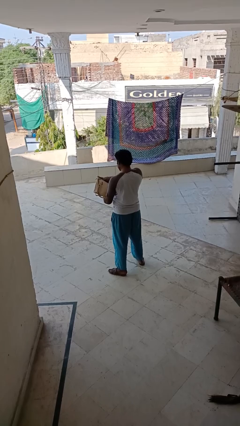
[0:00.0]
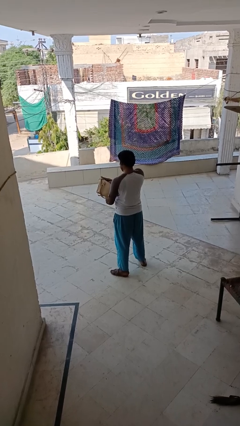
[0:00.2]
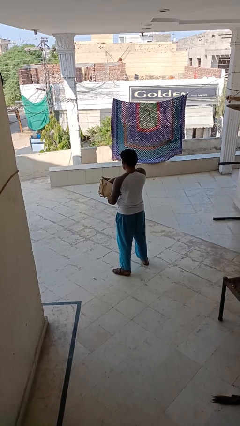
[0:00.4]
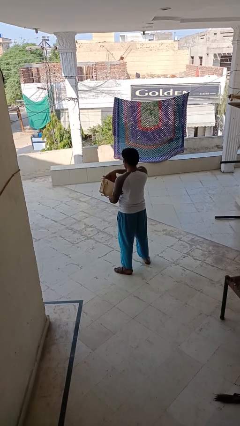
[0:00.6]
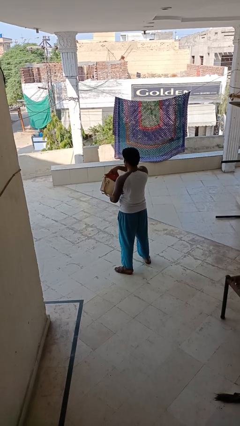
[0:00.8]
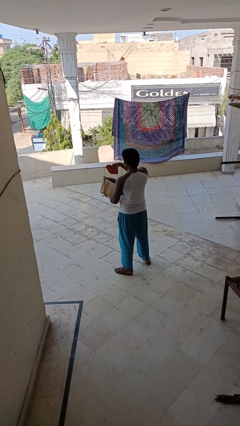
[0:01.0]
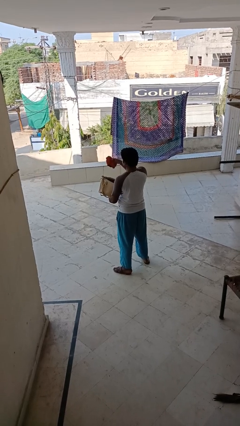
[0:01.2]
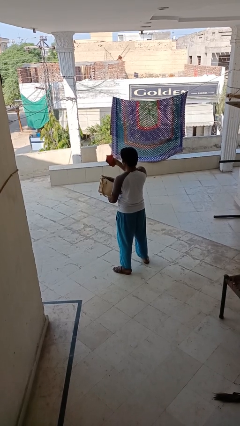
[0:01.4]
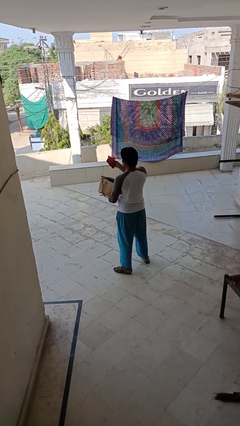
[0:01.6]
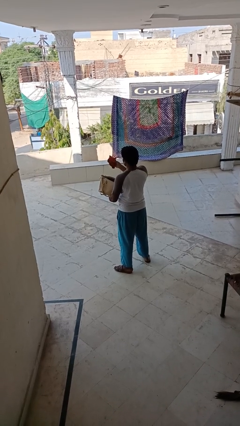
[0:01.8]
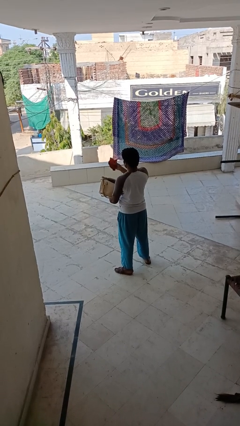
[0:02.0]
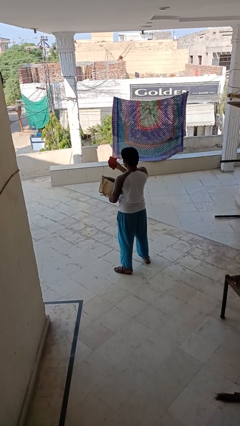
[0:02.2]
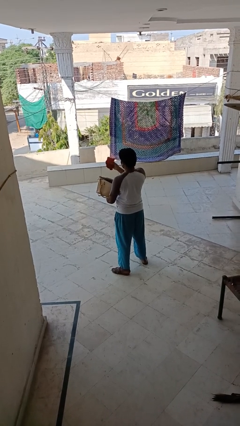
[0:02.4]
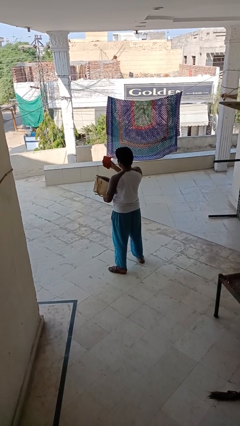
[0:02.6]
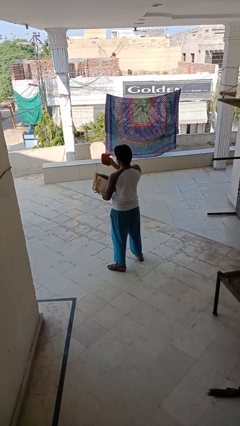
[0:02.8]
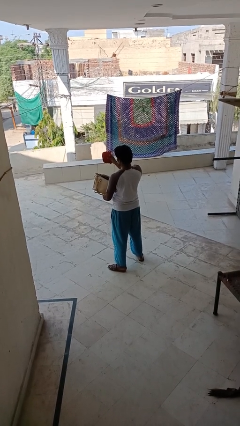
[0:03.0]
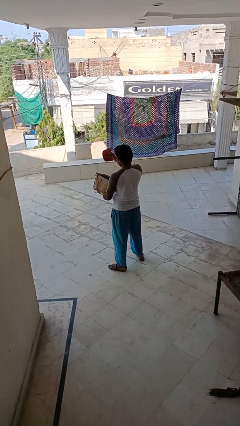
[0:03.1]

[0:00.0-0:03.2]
person takes object from purse

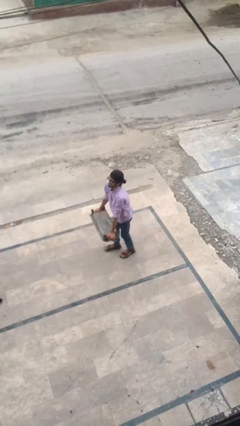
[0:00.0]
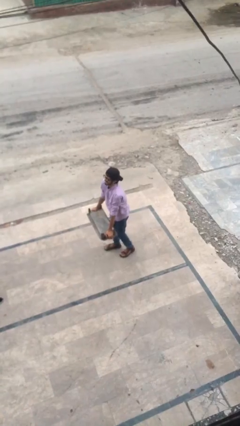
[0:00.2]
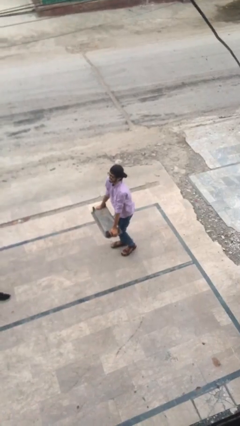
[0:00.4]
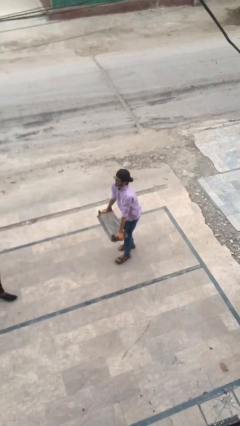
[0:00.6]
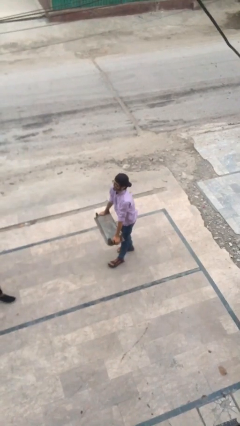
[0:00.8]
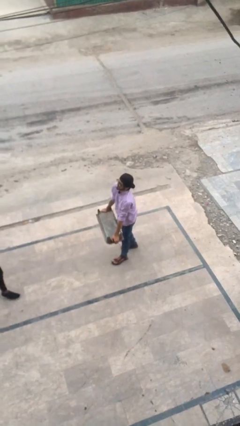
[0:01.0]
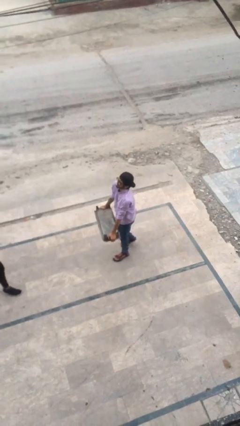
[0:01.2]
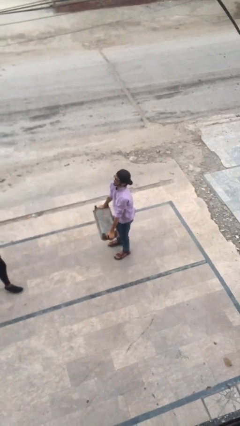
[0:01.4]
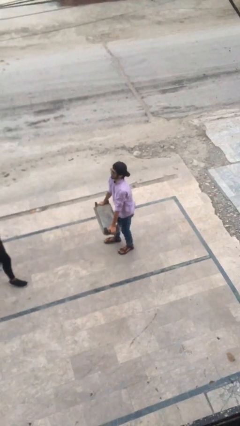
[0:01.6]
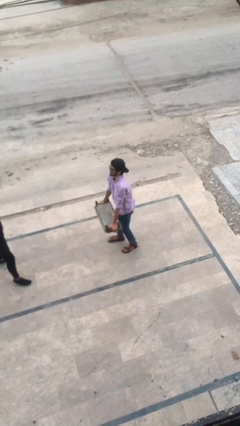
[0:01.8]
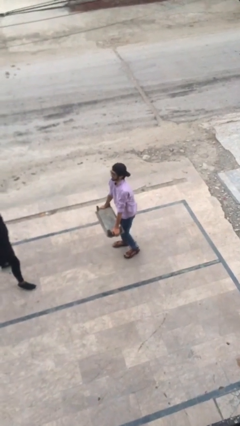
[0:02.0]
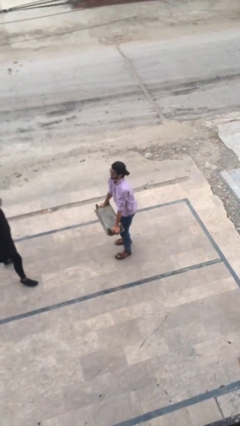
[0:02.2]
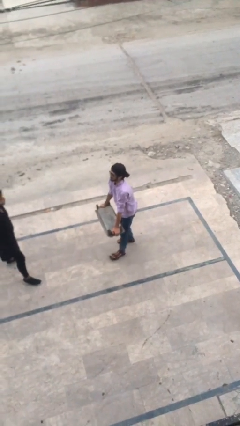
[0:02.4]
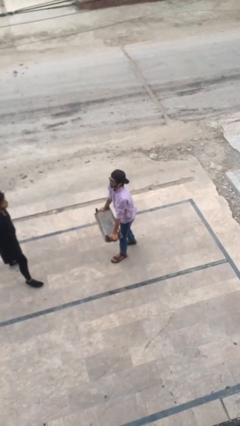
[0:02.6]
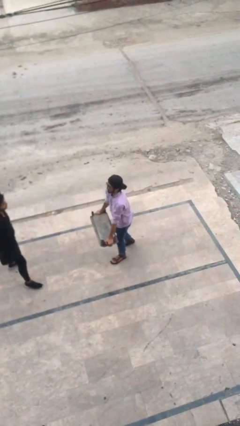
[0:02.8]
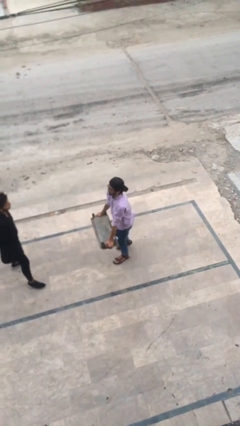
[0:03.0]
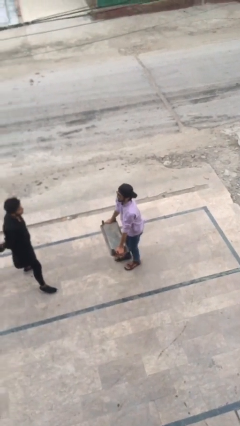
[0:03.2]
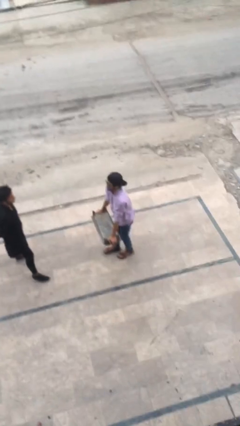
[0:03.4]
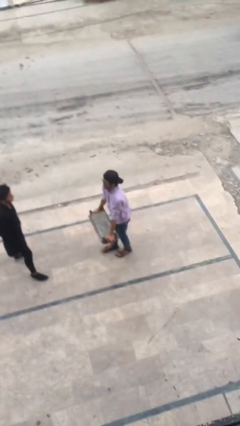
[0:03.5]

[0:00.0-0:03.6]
person carries heavy object

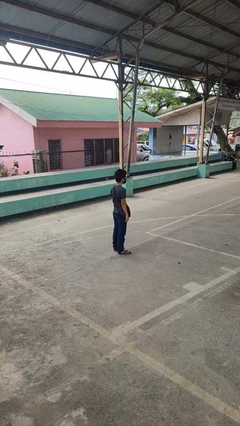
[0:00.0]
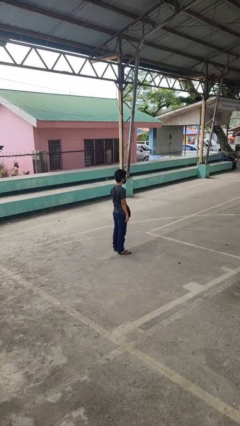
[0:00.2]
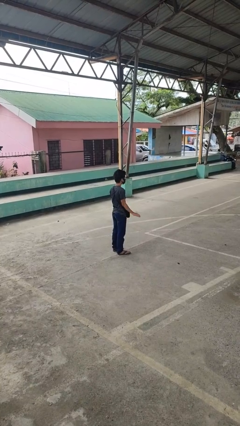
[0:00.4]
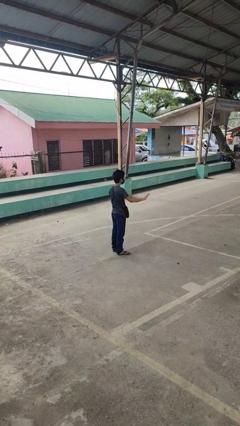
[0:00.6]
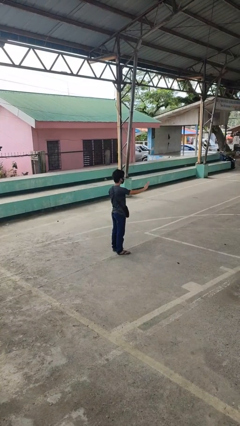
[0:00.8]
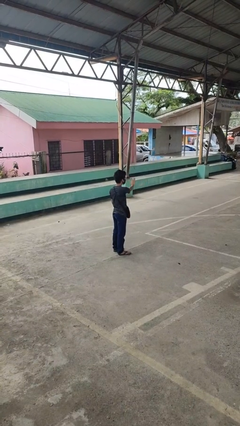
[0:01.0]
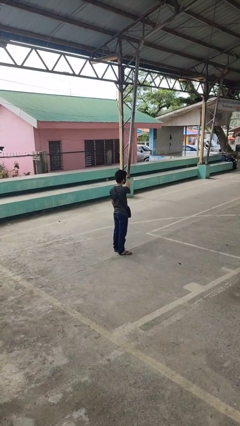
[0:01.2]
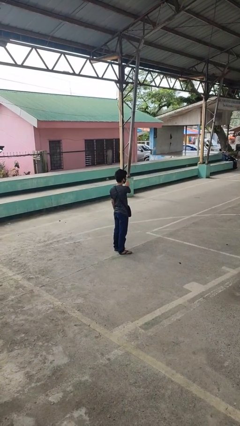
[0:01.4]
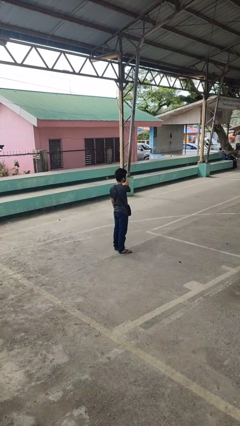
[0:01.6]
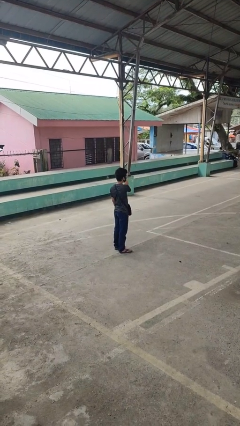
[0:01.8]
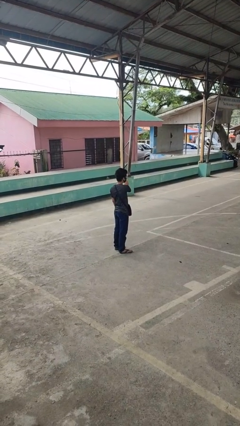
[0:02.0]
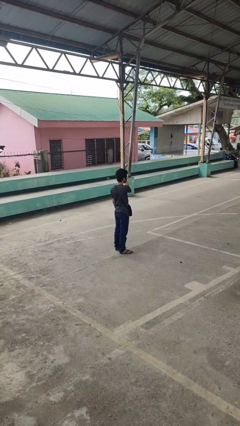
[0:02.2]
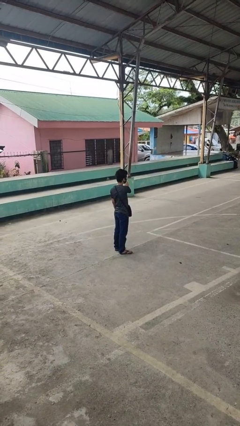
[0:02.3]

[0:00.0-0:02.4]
person gestures swipe left

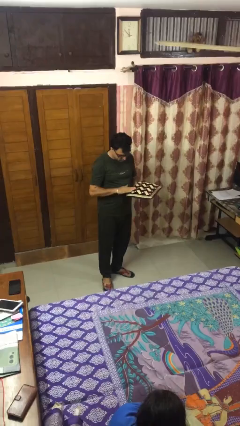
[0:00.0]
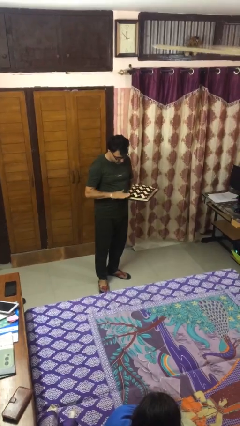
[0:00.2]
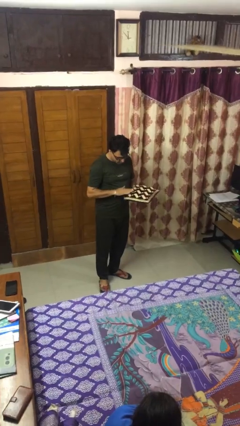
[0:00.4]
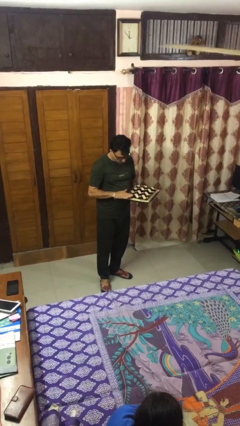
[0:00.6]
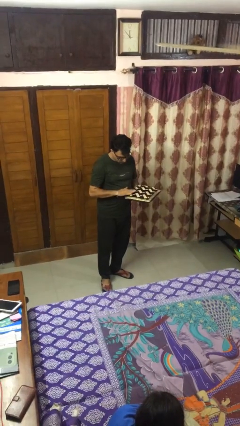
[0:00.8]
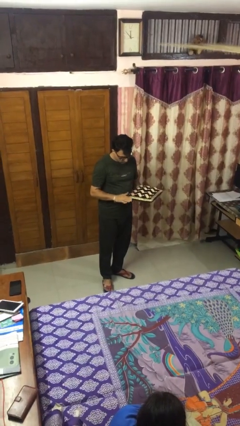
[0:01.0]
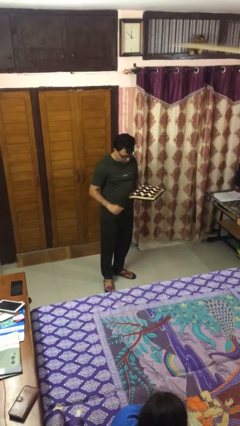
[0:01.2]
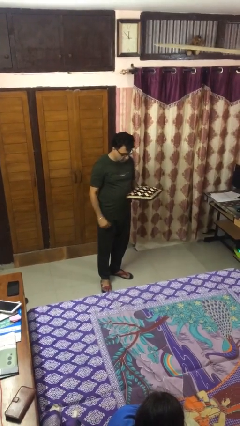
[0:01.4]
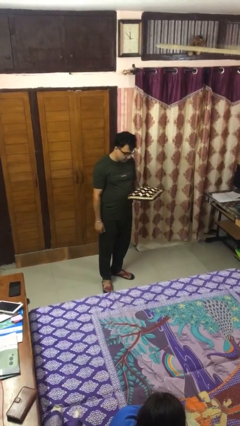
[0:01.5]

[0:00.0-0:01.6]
person waves hand over object

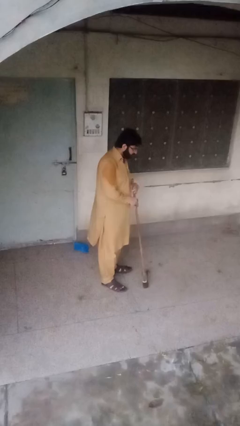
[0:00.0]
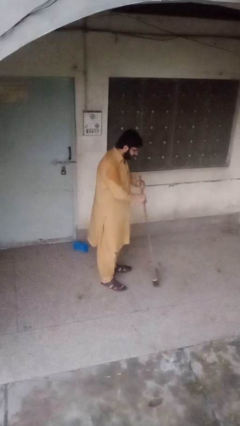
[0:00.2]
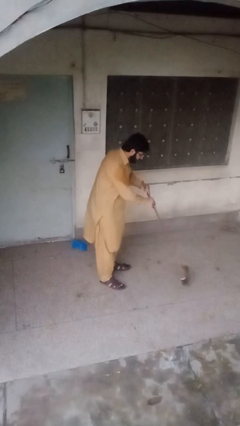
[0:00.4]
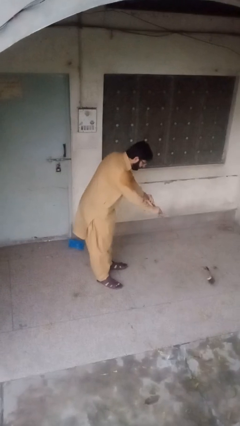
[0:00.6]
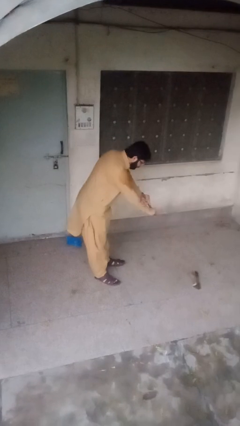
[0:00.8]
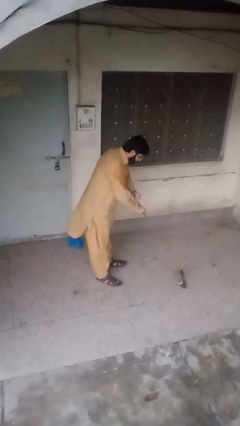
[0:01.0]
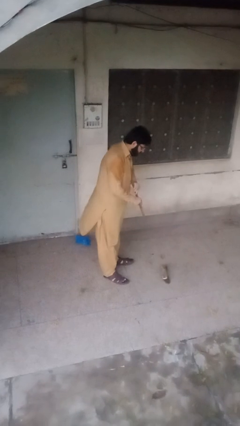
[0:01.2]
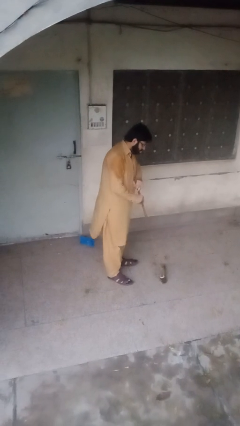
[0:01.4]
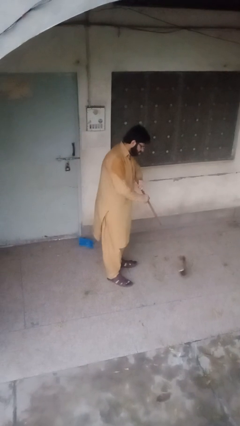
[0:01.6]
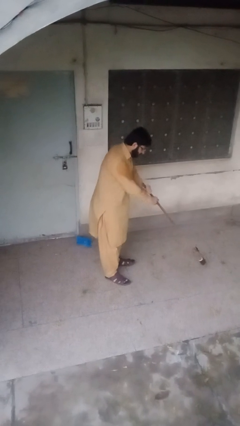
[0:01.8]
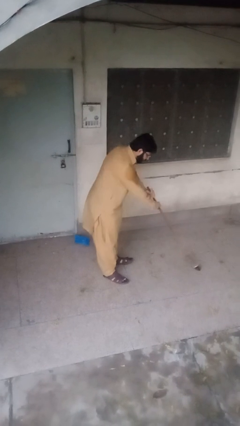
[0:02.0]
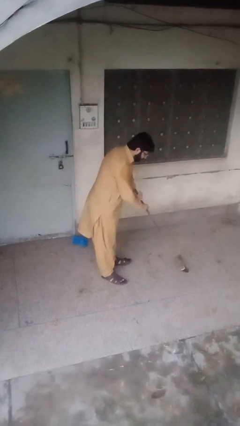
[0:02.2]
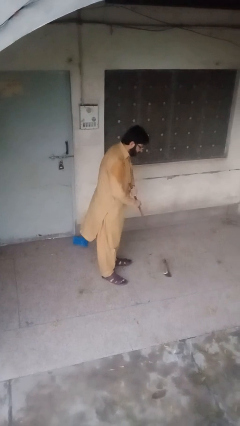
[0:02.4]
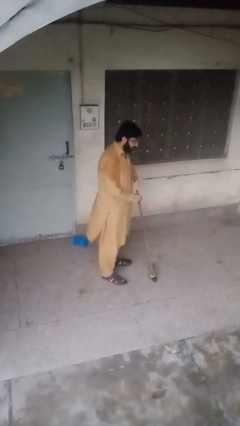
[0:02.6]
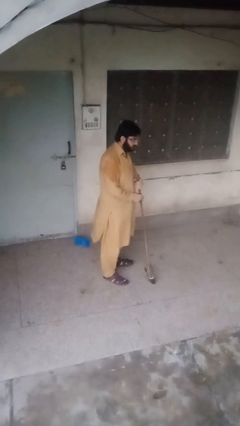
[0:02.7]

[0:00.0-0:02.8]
person sweeps floor

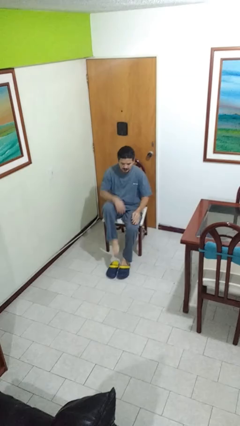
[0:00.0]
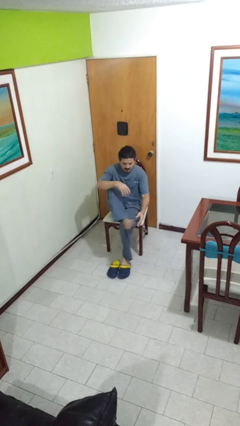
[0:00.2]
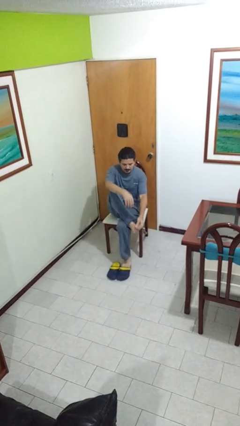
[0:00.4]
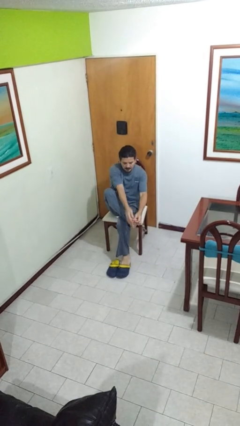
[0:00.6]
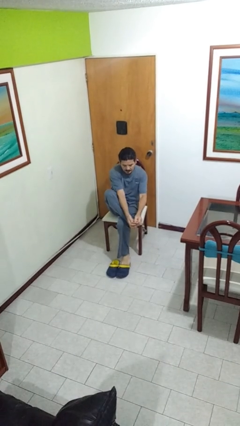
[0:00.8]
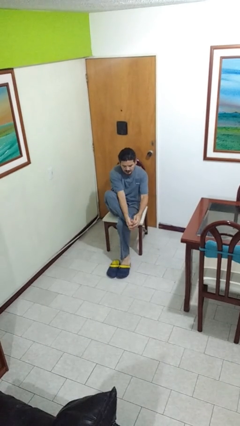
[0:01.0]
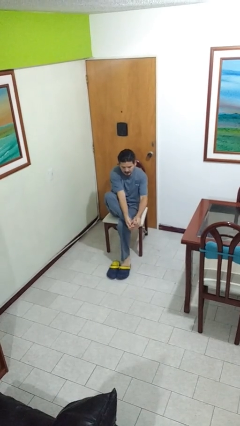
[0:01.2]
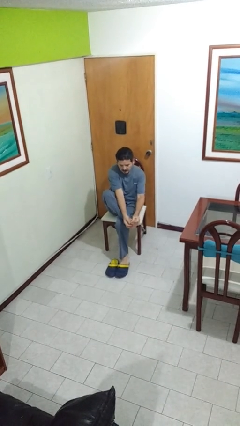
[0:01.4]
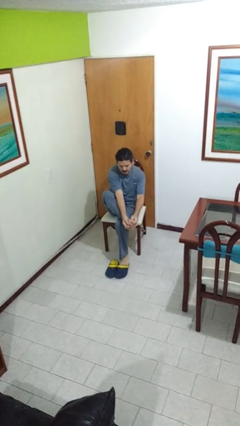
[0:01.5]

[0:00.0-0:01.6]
person rubs foot

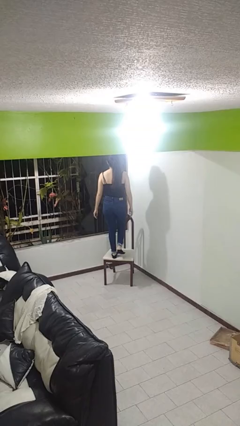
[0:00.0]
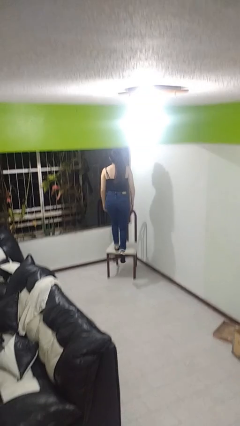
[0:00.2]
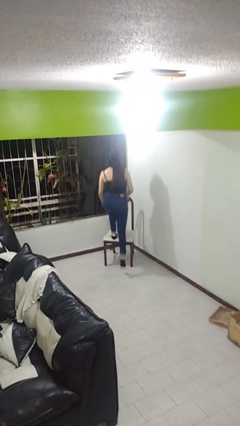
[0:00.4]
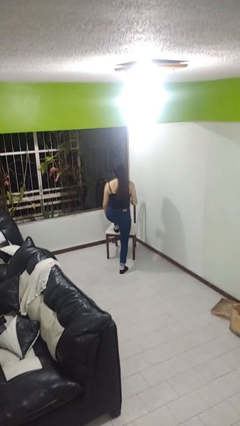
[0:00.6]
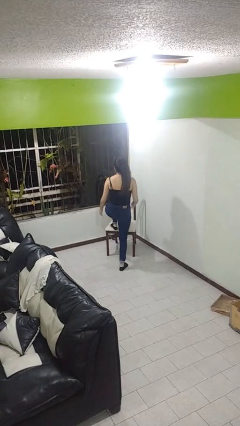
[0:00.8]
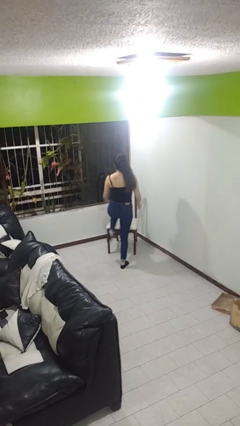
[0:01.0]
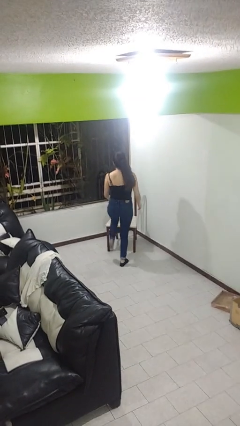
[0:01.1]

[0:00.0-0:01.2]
person climbs off chair

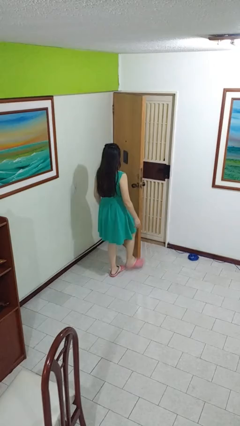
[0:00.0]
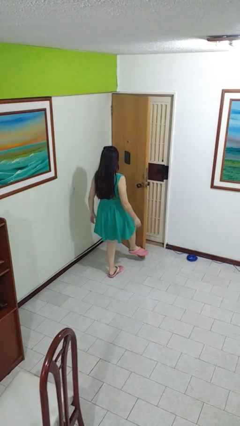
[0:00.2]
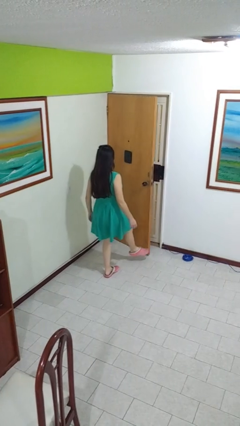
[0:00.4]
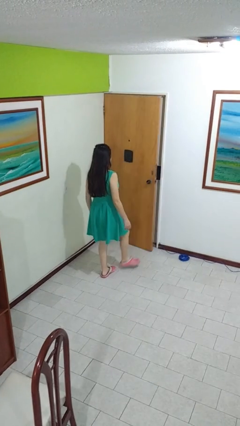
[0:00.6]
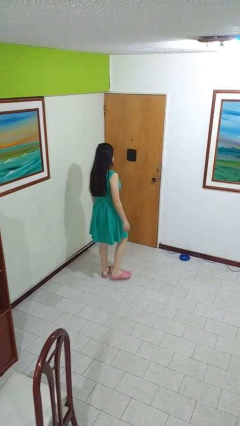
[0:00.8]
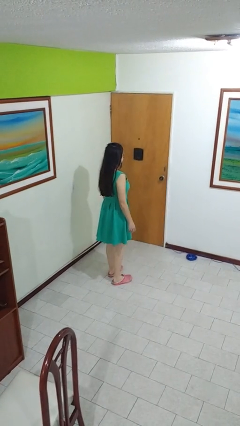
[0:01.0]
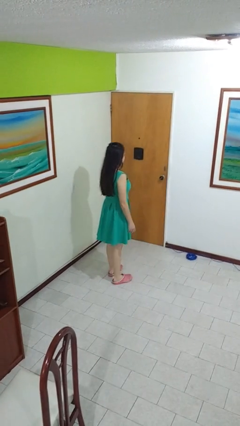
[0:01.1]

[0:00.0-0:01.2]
person closes door with foot
